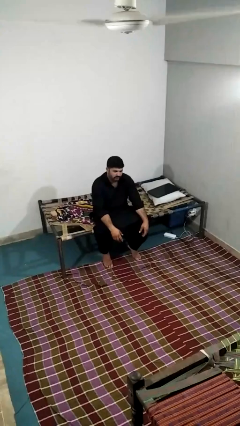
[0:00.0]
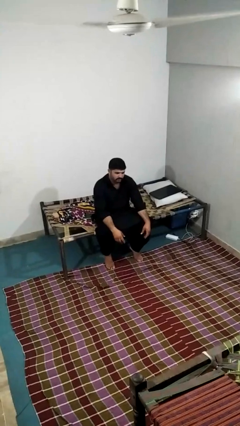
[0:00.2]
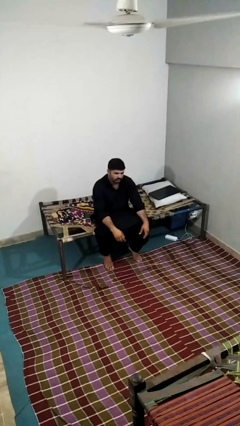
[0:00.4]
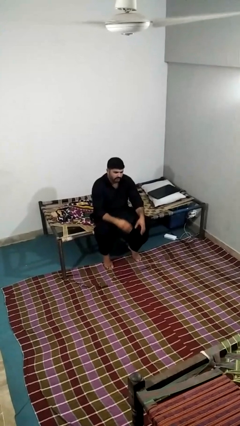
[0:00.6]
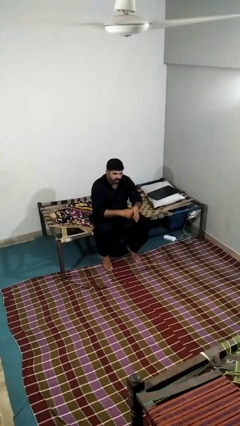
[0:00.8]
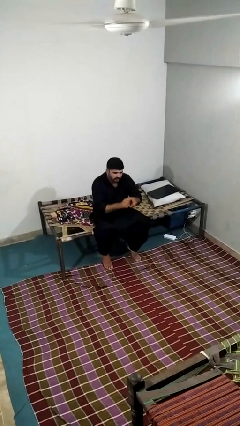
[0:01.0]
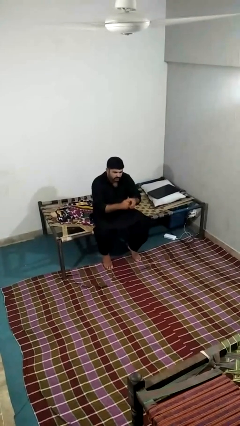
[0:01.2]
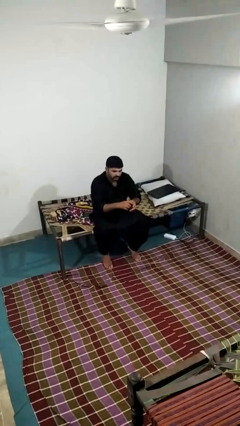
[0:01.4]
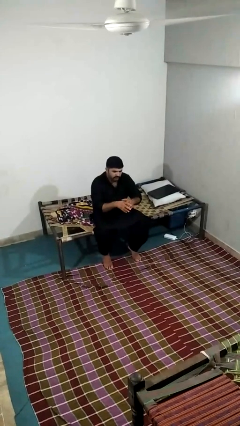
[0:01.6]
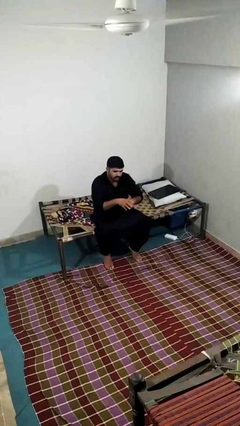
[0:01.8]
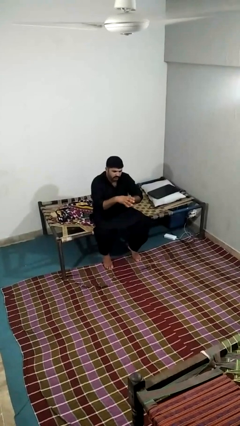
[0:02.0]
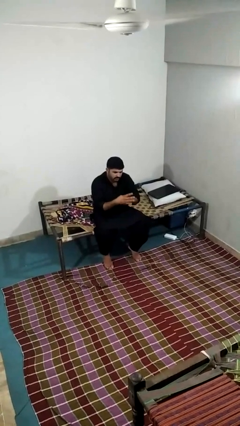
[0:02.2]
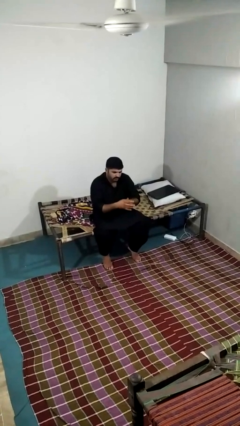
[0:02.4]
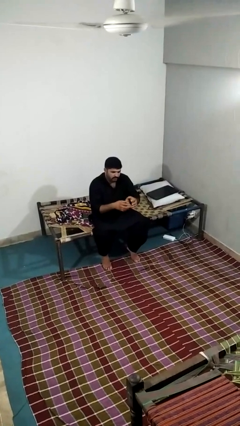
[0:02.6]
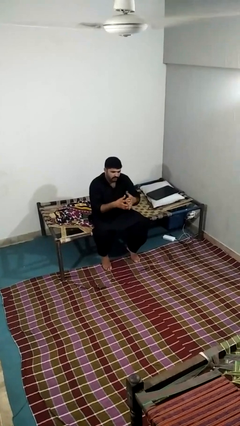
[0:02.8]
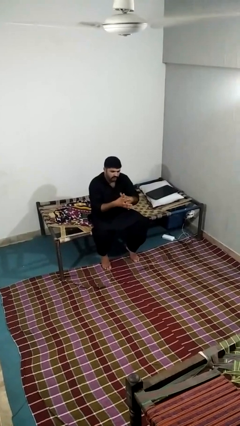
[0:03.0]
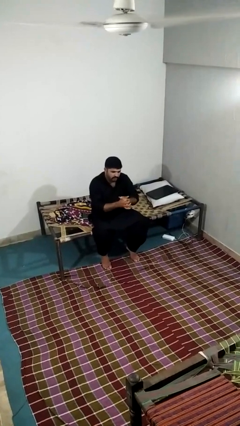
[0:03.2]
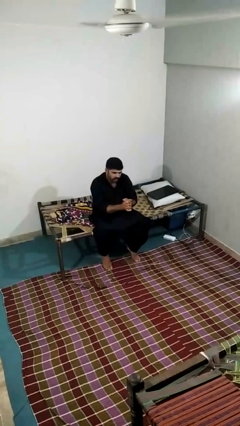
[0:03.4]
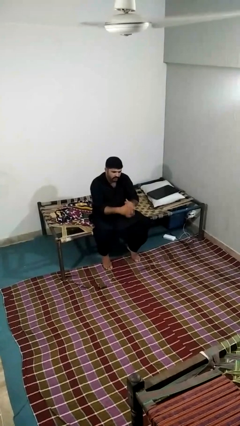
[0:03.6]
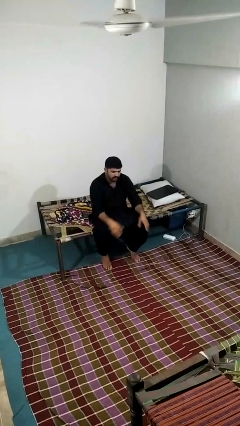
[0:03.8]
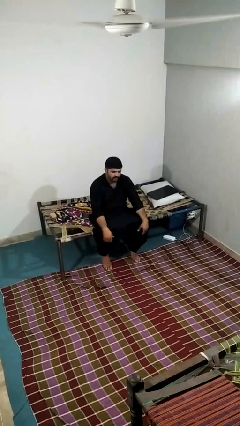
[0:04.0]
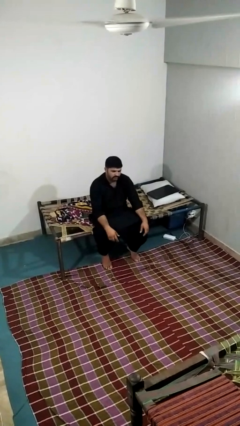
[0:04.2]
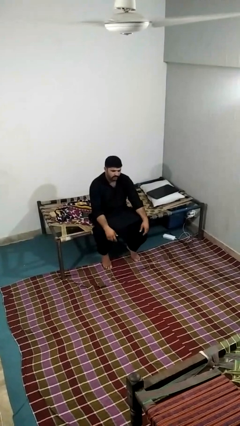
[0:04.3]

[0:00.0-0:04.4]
person cracks knuckles

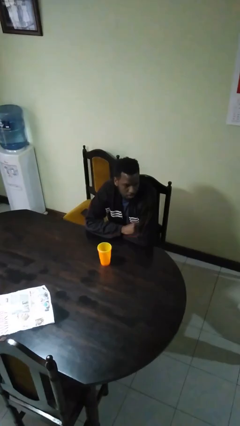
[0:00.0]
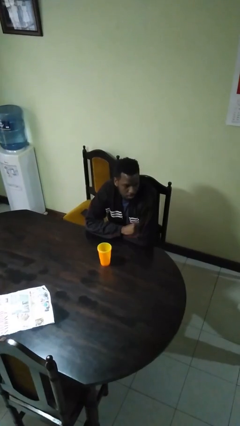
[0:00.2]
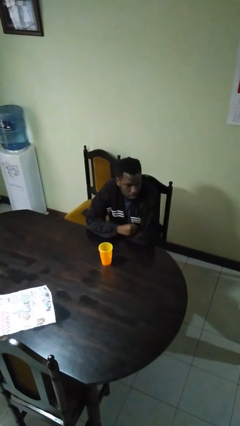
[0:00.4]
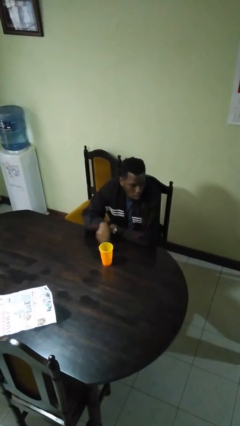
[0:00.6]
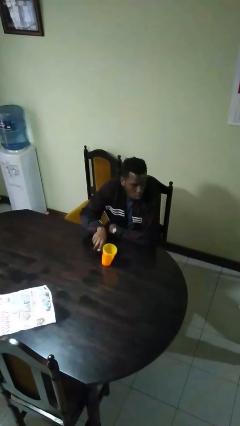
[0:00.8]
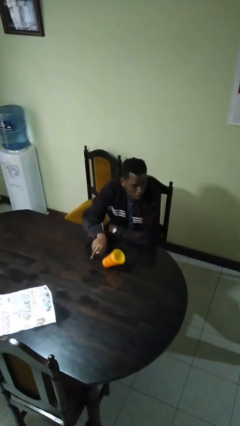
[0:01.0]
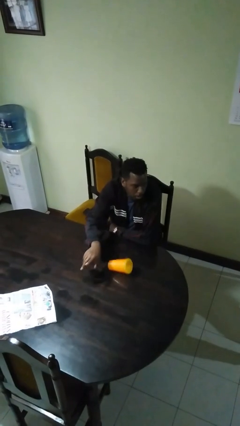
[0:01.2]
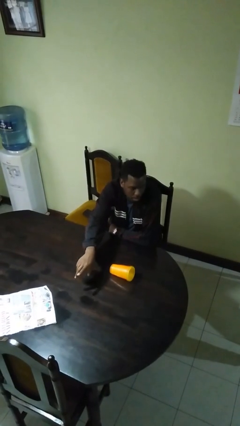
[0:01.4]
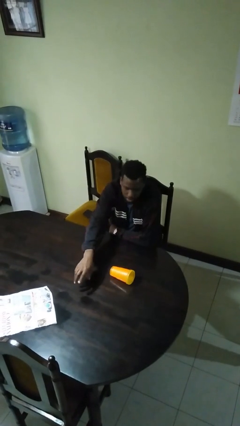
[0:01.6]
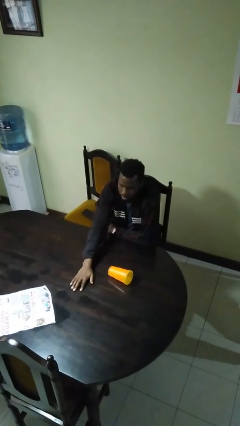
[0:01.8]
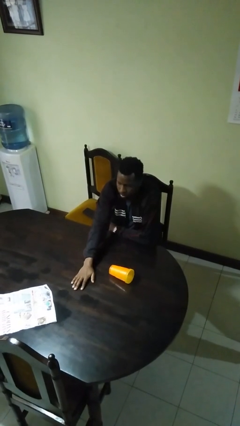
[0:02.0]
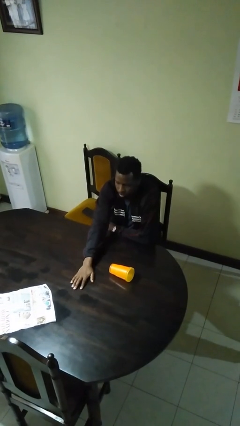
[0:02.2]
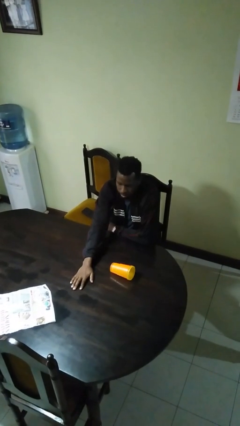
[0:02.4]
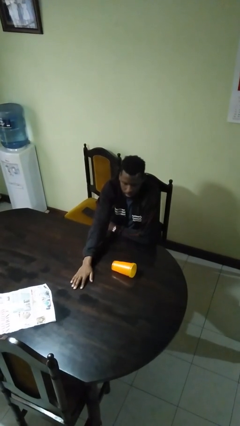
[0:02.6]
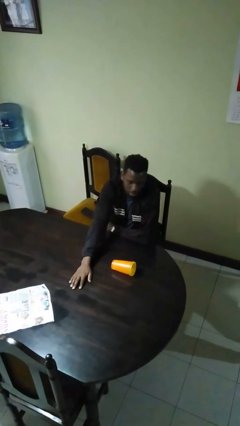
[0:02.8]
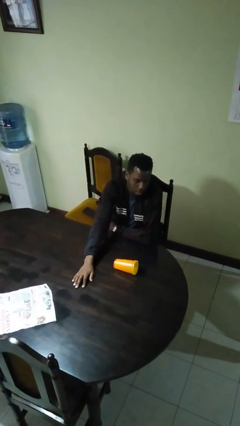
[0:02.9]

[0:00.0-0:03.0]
person knocks over glass

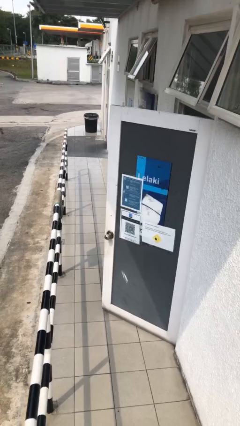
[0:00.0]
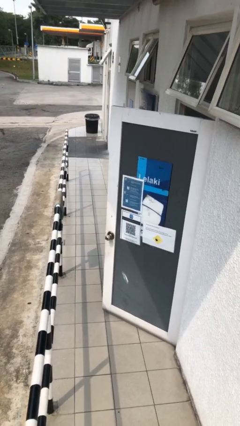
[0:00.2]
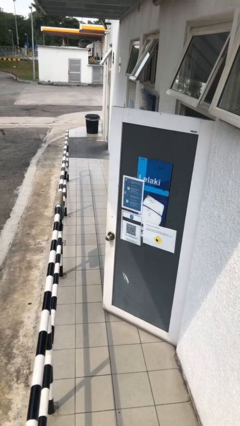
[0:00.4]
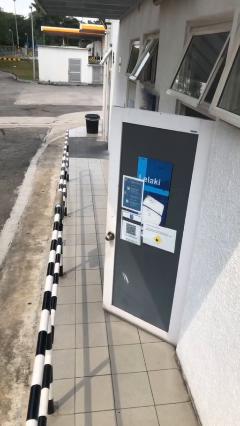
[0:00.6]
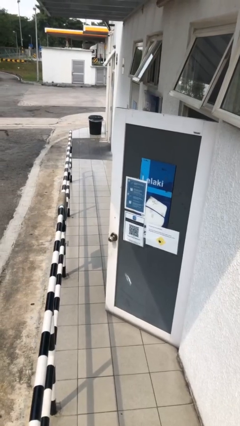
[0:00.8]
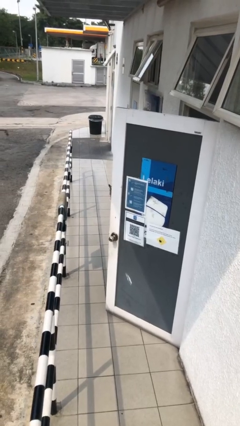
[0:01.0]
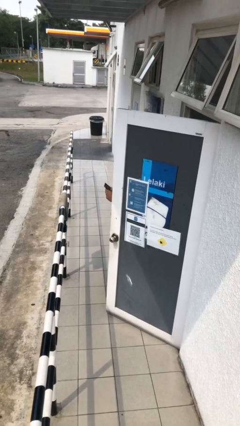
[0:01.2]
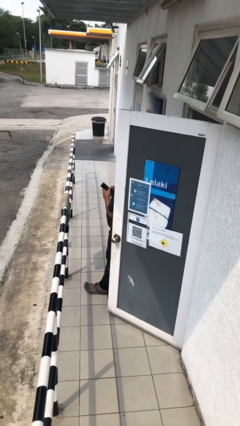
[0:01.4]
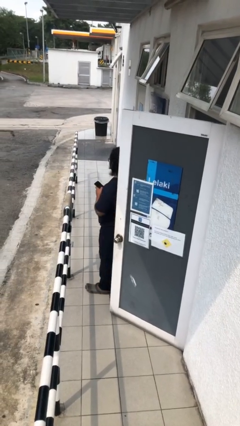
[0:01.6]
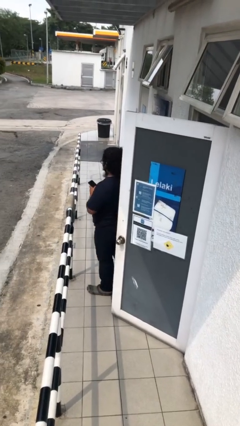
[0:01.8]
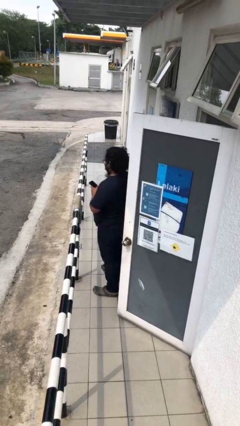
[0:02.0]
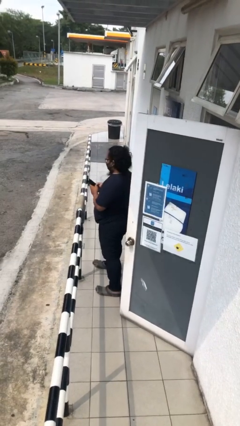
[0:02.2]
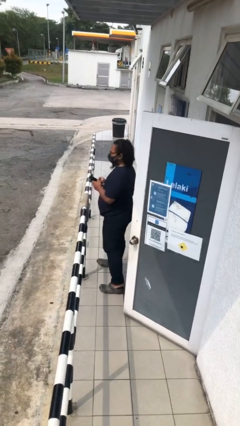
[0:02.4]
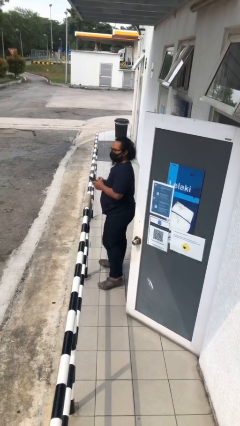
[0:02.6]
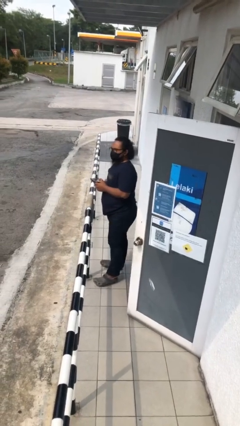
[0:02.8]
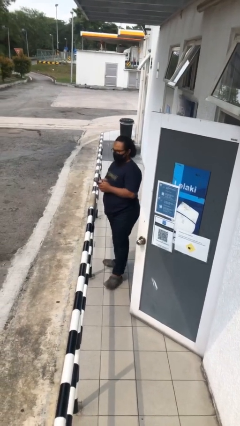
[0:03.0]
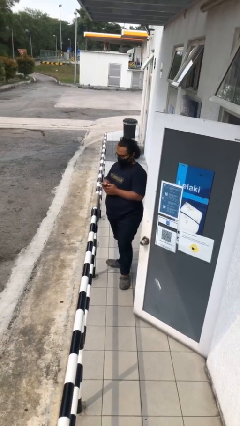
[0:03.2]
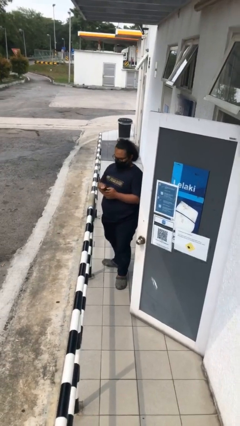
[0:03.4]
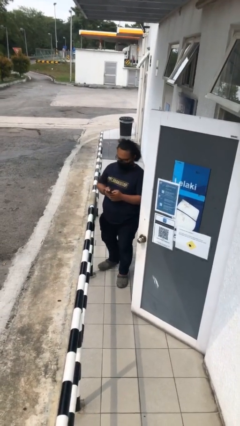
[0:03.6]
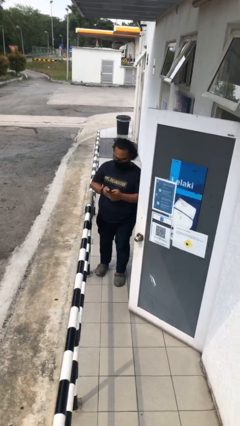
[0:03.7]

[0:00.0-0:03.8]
person enters scene through structure

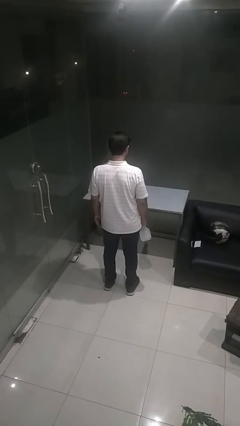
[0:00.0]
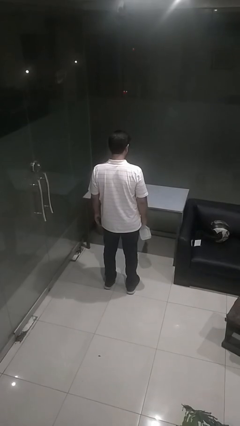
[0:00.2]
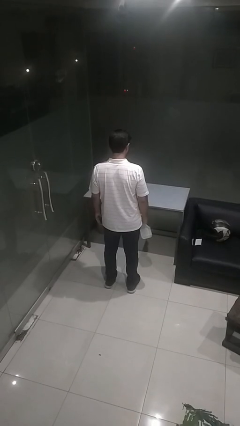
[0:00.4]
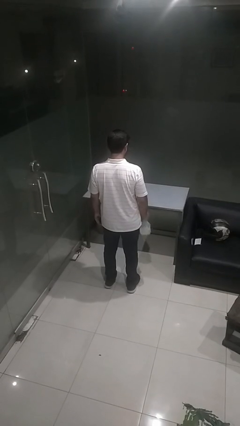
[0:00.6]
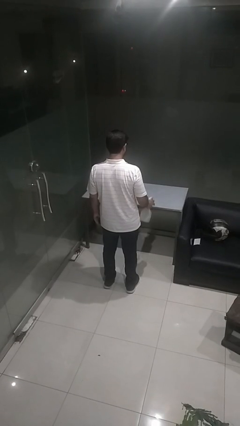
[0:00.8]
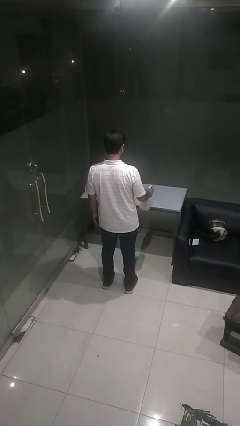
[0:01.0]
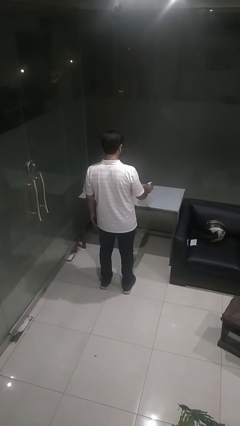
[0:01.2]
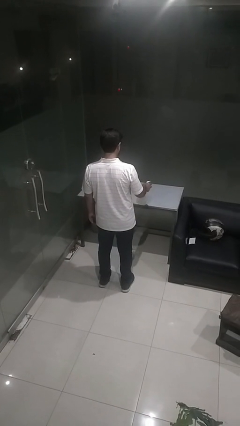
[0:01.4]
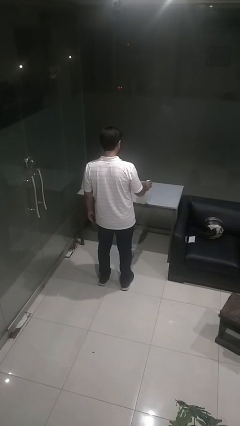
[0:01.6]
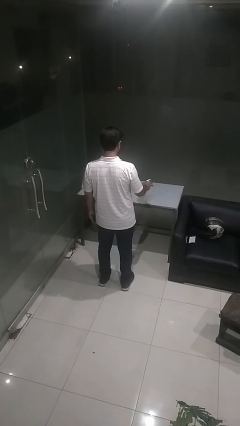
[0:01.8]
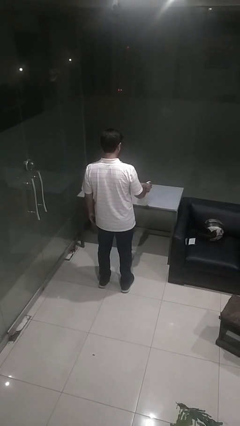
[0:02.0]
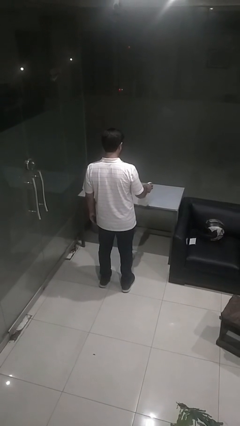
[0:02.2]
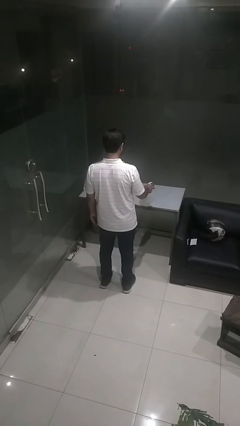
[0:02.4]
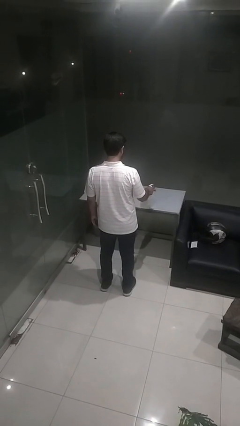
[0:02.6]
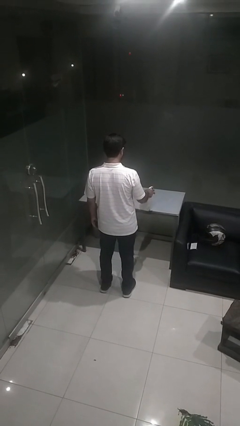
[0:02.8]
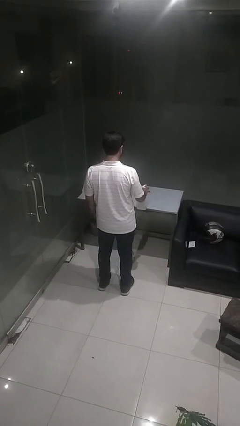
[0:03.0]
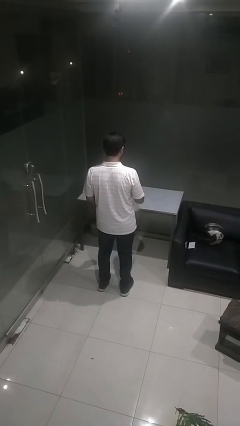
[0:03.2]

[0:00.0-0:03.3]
person sprays from bottle

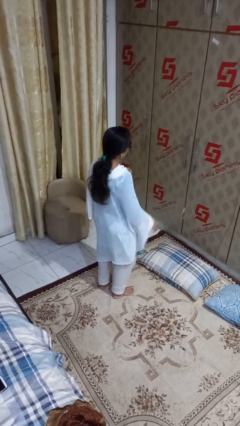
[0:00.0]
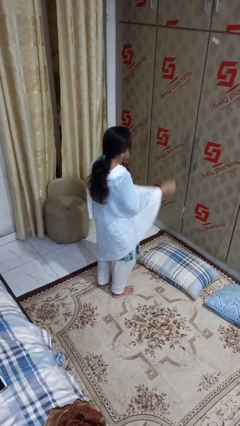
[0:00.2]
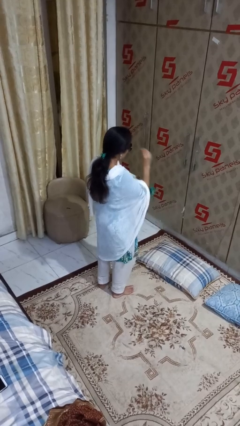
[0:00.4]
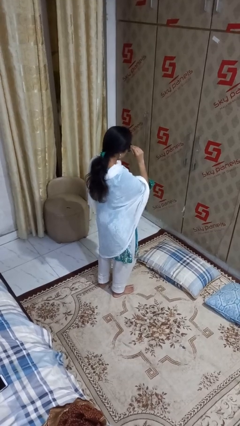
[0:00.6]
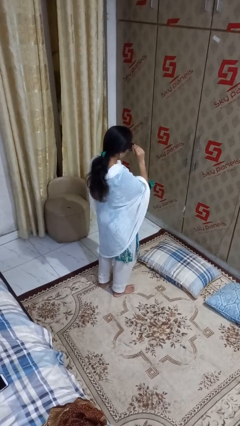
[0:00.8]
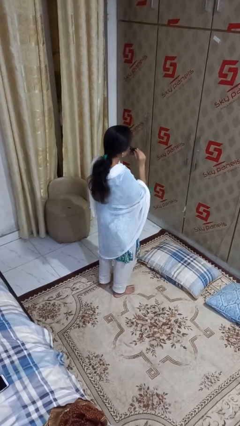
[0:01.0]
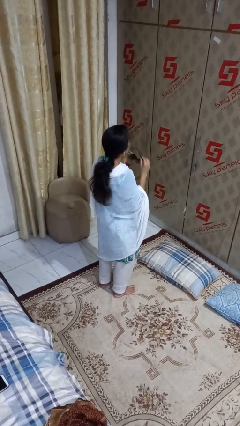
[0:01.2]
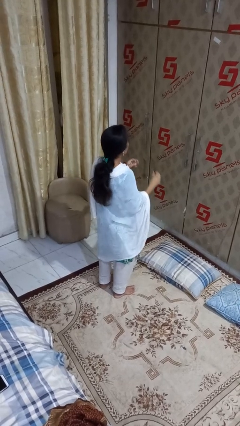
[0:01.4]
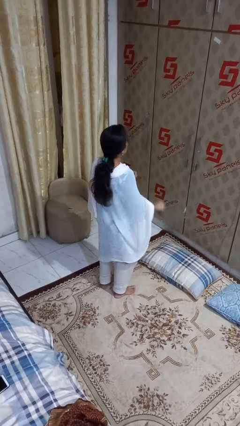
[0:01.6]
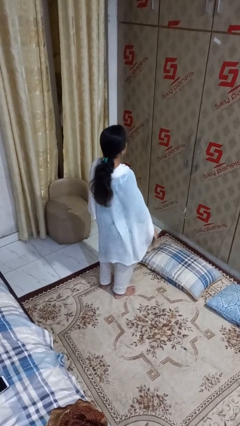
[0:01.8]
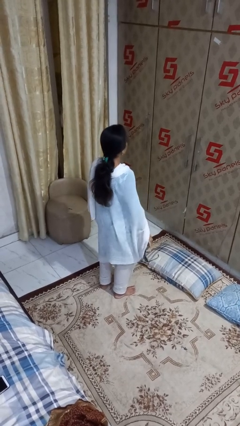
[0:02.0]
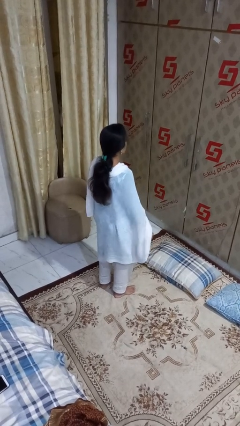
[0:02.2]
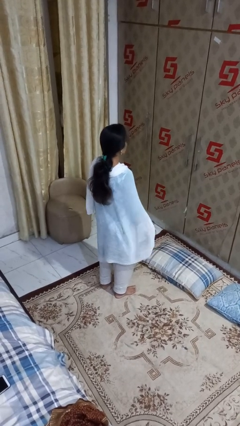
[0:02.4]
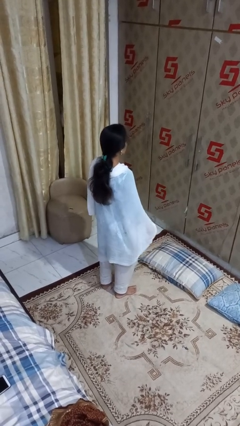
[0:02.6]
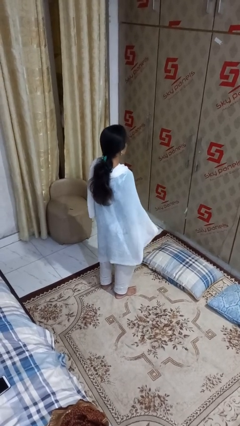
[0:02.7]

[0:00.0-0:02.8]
person takes off sunglasses

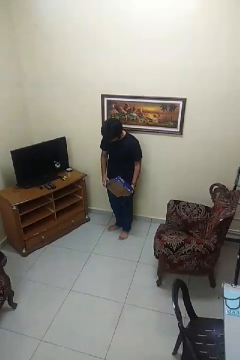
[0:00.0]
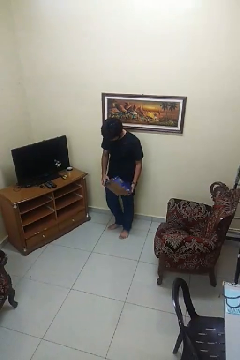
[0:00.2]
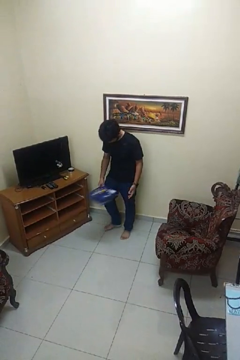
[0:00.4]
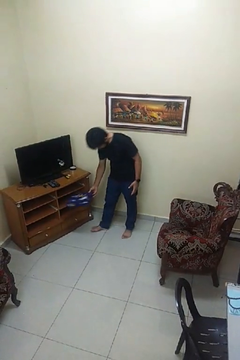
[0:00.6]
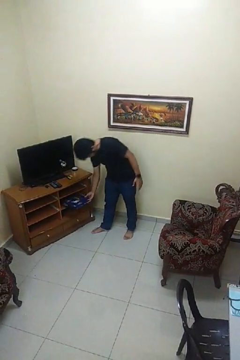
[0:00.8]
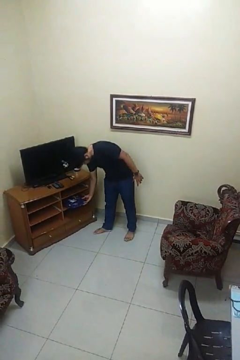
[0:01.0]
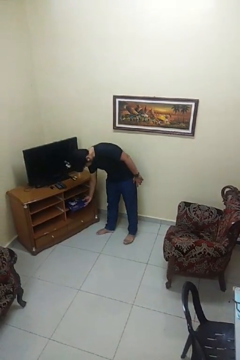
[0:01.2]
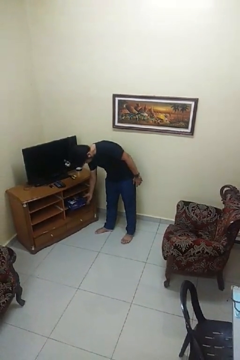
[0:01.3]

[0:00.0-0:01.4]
person puts down object into cabinet
